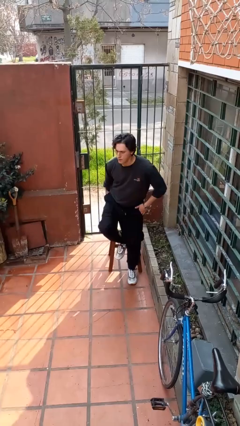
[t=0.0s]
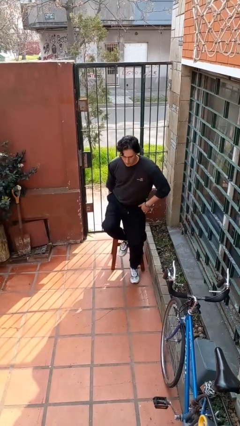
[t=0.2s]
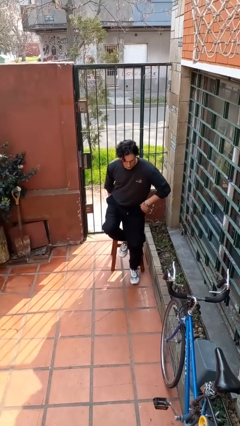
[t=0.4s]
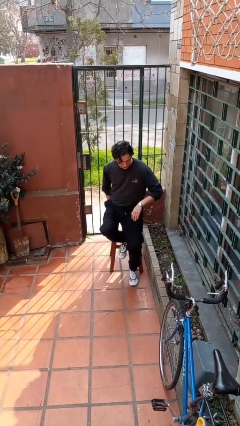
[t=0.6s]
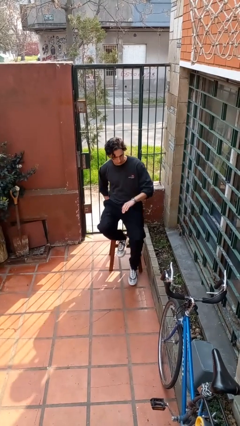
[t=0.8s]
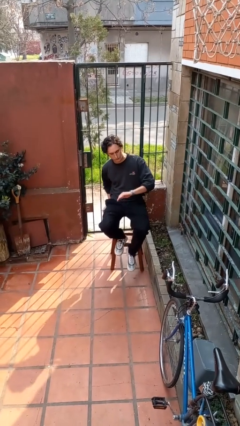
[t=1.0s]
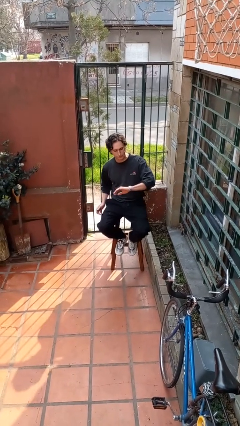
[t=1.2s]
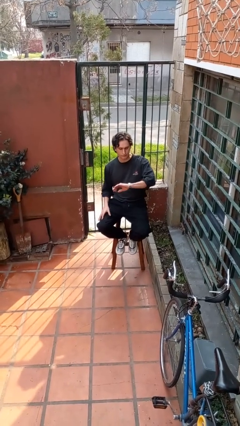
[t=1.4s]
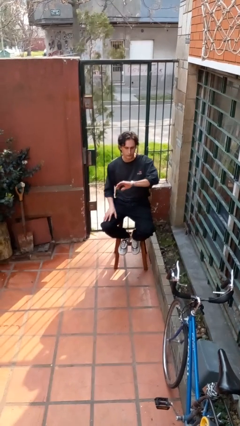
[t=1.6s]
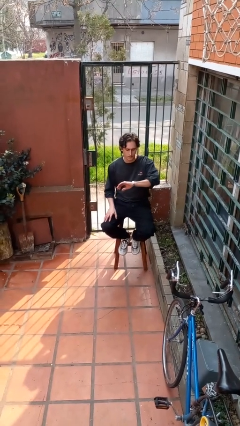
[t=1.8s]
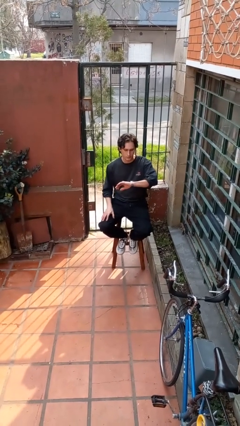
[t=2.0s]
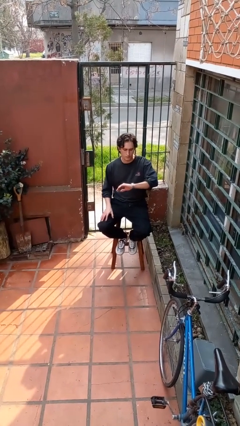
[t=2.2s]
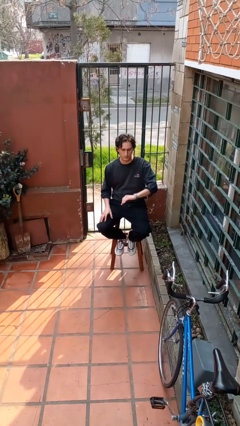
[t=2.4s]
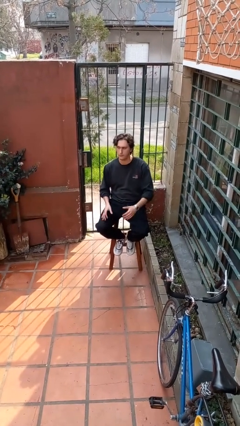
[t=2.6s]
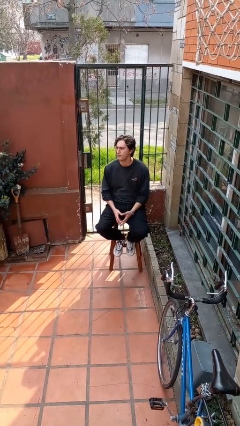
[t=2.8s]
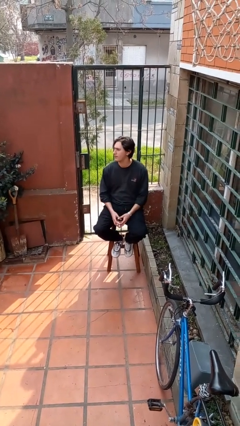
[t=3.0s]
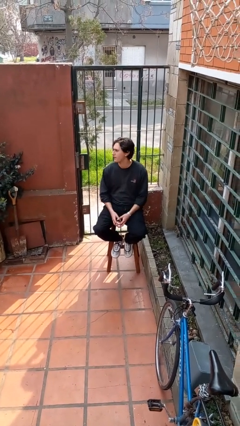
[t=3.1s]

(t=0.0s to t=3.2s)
person looks at wristwatch

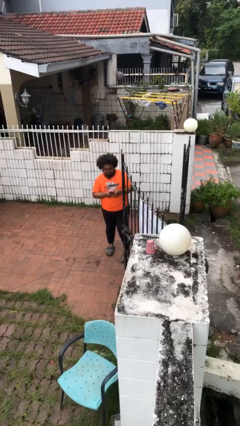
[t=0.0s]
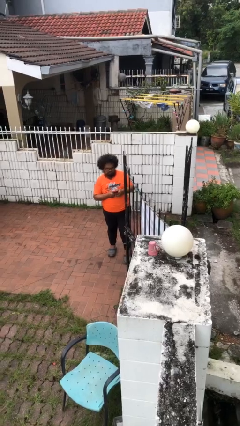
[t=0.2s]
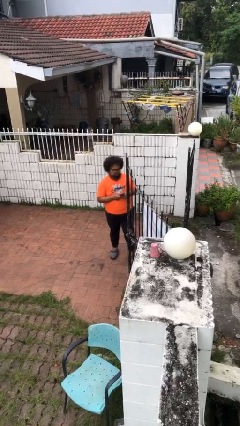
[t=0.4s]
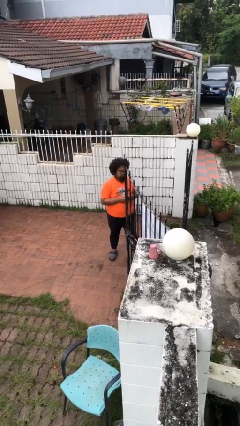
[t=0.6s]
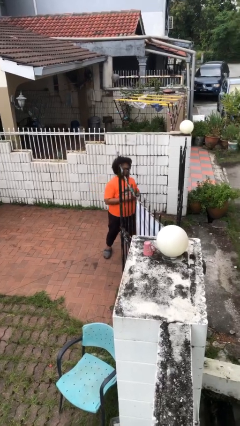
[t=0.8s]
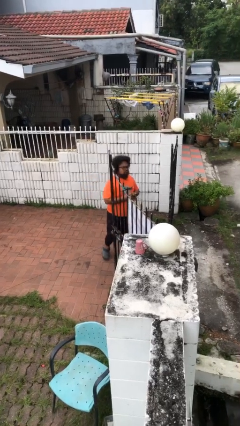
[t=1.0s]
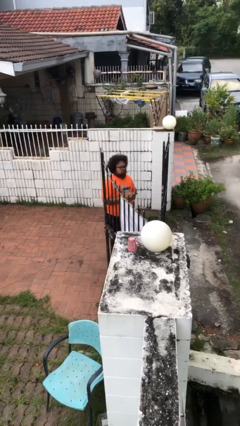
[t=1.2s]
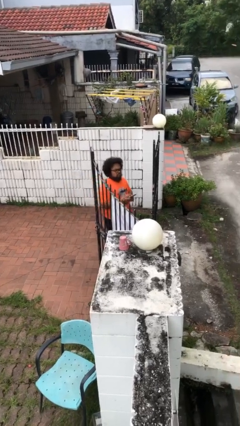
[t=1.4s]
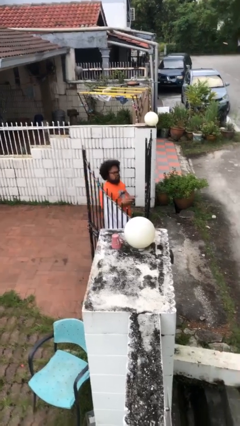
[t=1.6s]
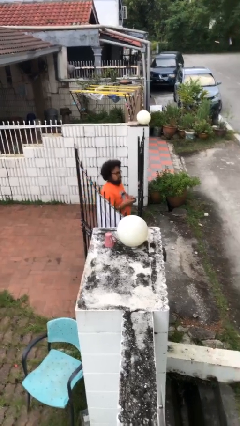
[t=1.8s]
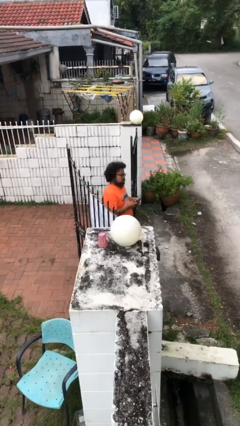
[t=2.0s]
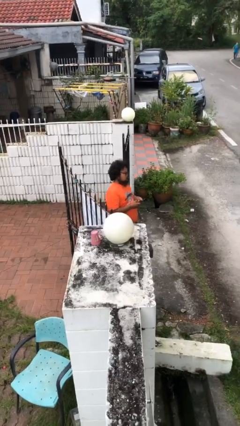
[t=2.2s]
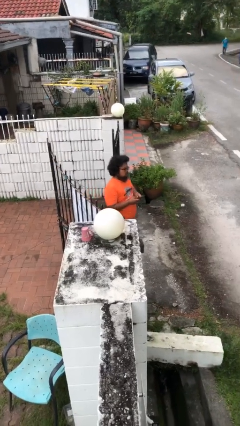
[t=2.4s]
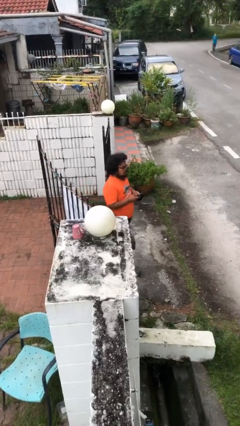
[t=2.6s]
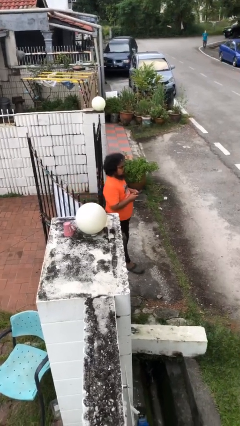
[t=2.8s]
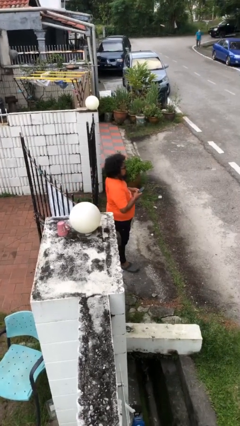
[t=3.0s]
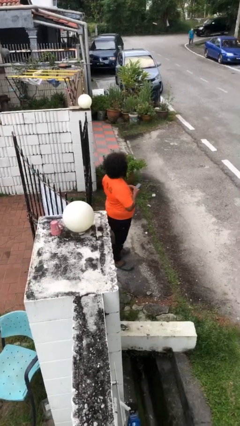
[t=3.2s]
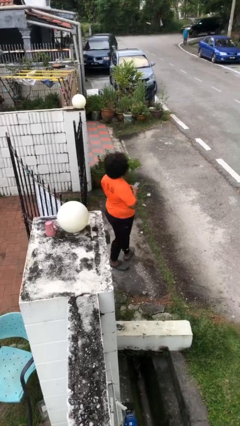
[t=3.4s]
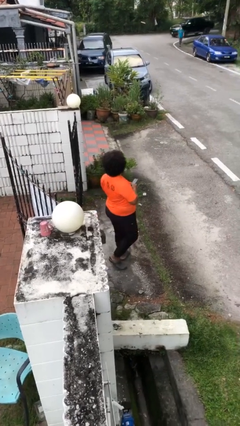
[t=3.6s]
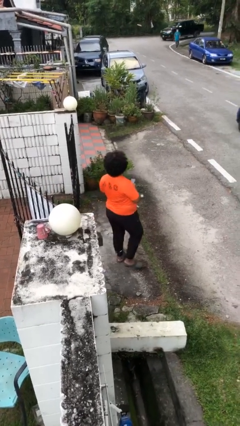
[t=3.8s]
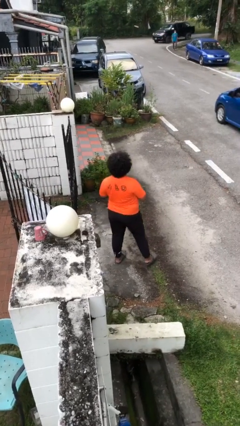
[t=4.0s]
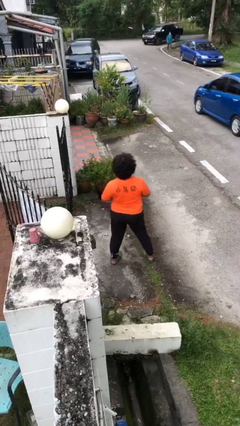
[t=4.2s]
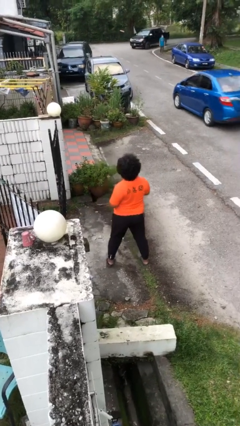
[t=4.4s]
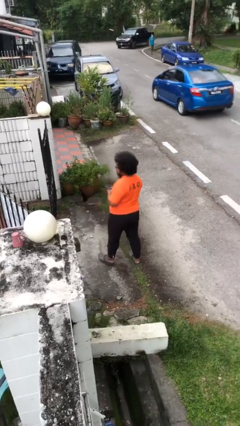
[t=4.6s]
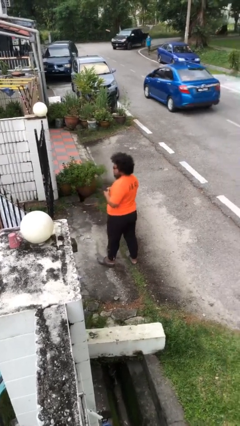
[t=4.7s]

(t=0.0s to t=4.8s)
person exits scene through structure

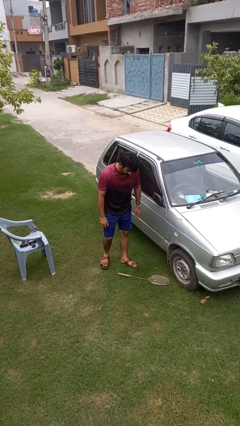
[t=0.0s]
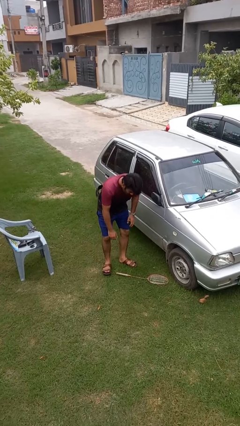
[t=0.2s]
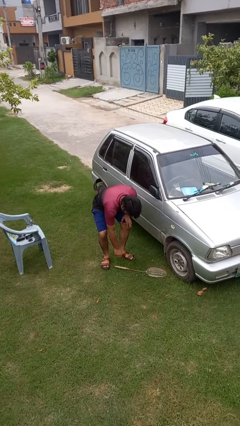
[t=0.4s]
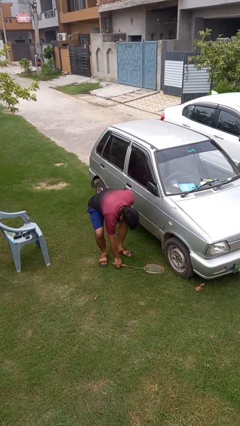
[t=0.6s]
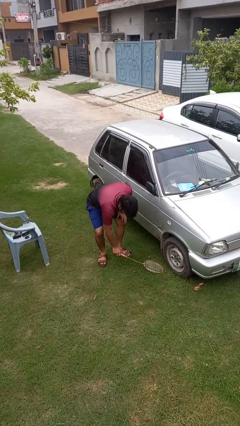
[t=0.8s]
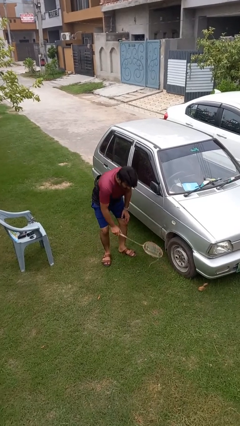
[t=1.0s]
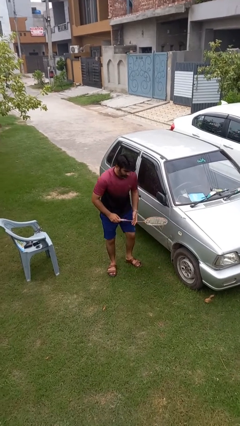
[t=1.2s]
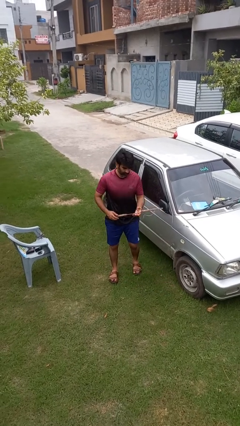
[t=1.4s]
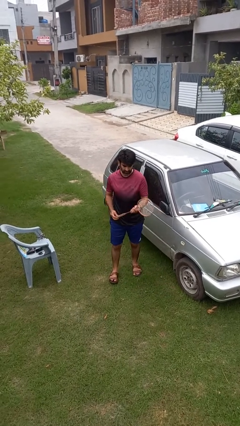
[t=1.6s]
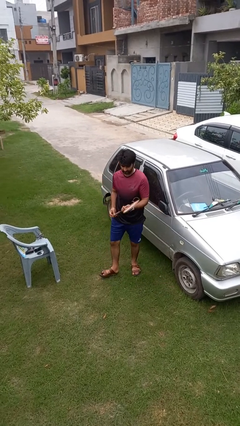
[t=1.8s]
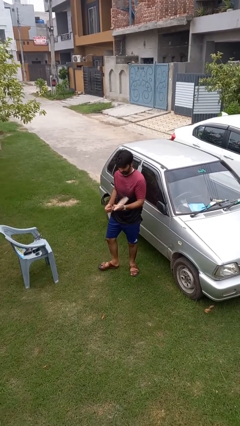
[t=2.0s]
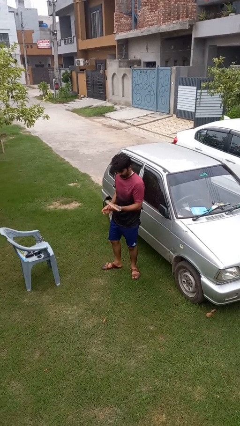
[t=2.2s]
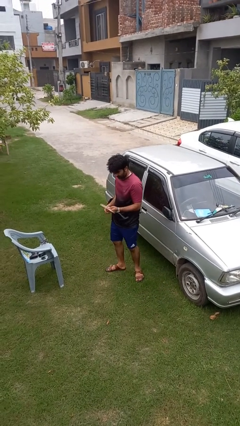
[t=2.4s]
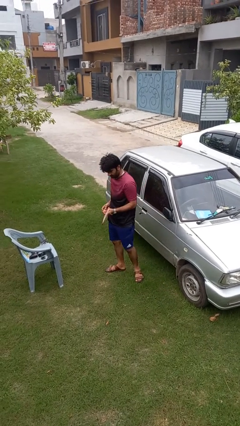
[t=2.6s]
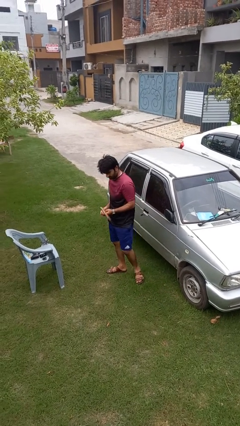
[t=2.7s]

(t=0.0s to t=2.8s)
person picks up object from floor

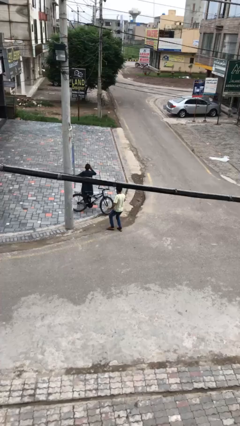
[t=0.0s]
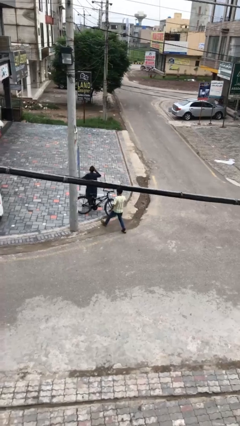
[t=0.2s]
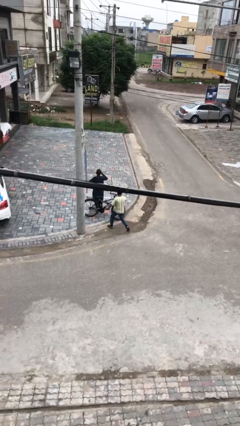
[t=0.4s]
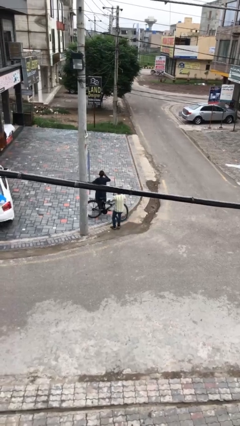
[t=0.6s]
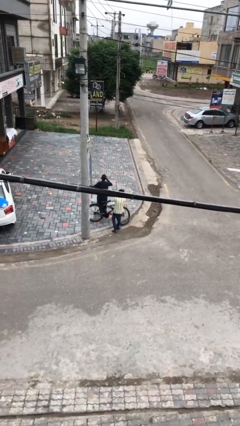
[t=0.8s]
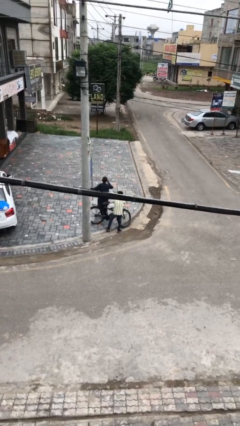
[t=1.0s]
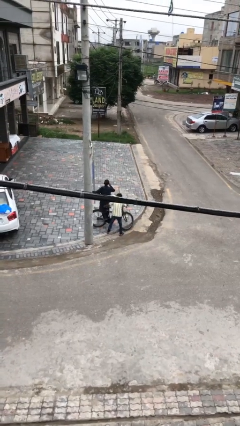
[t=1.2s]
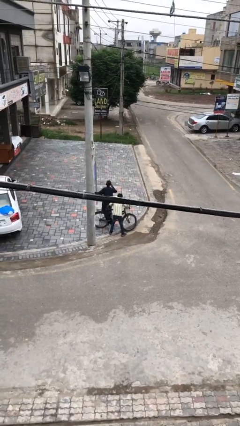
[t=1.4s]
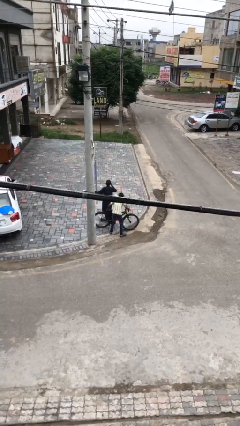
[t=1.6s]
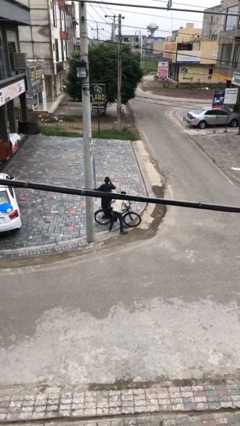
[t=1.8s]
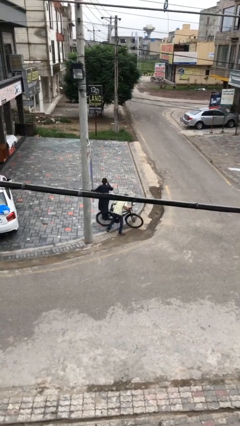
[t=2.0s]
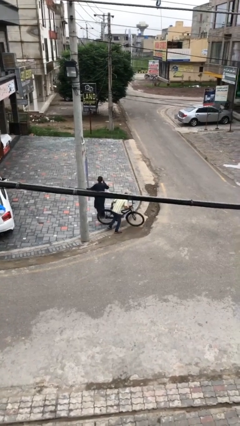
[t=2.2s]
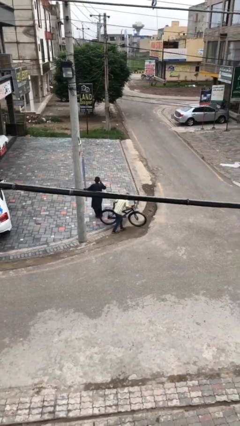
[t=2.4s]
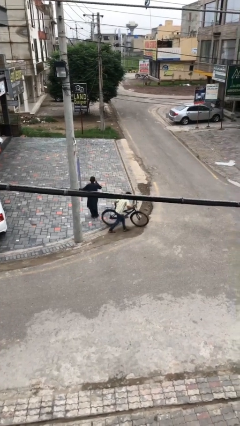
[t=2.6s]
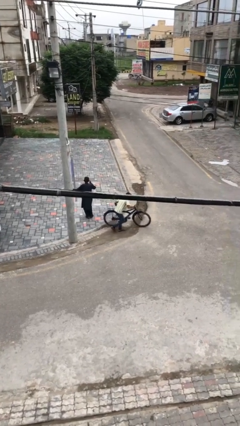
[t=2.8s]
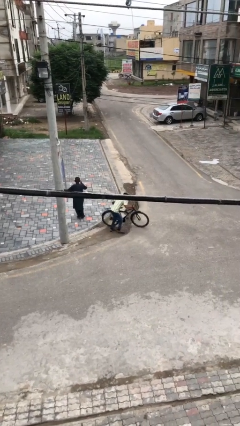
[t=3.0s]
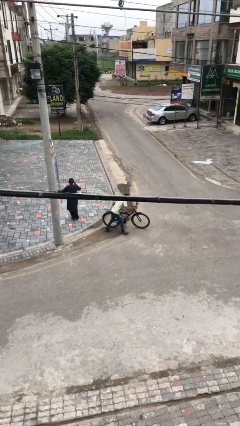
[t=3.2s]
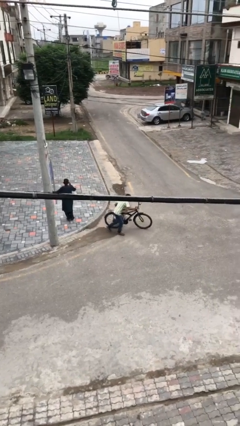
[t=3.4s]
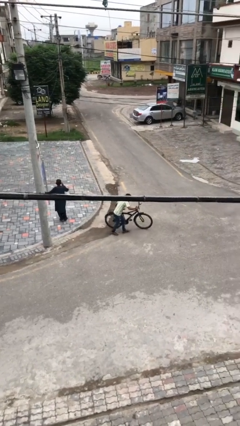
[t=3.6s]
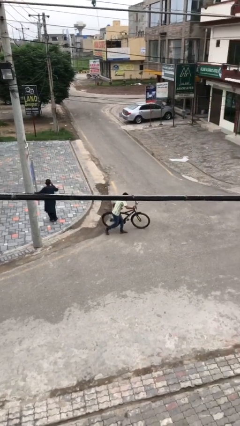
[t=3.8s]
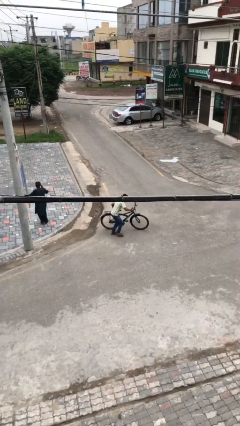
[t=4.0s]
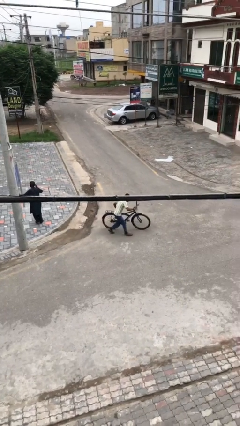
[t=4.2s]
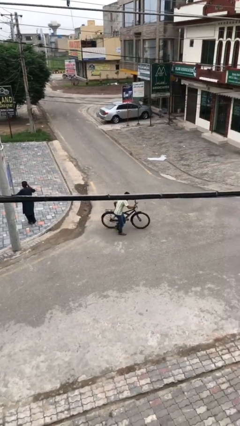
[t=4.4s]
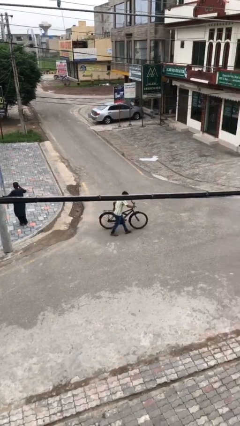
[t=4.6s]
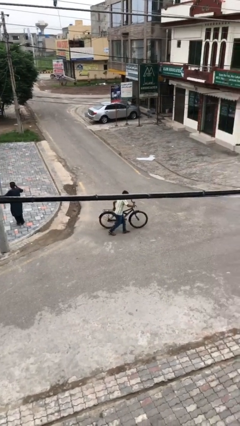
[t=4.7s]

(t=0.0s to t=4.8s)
person steals object from person

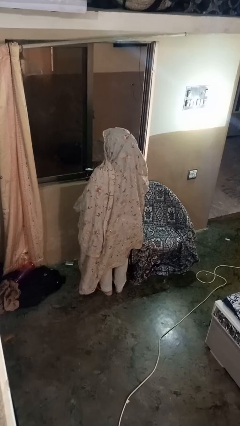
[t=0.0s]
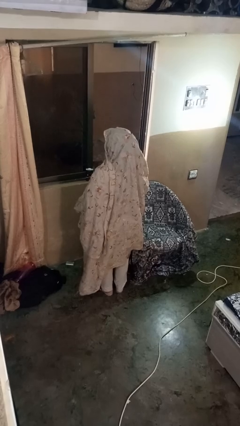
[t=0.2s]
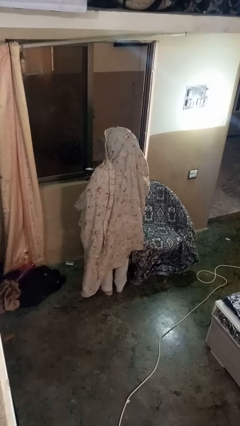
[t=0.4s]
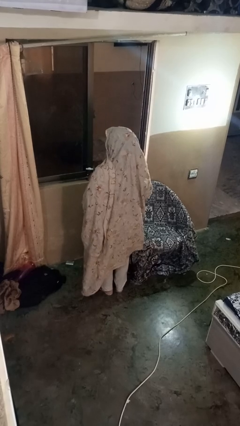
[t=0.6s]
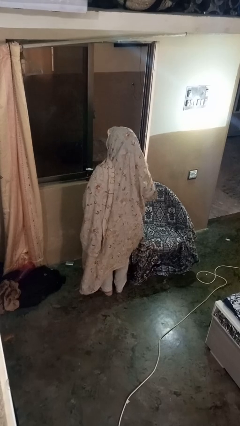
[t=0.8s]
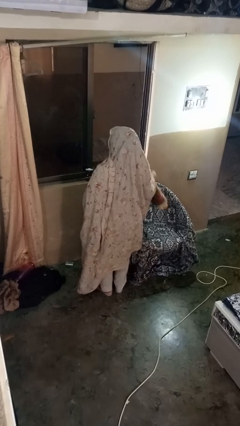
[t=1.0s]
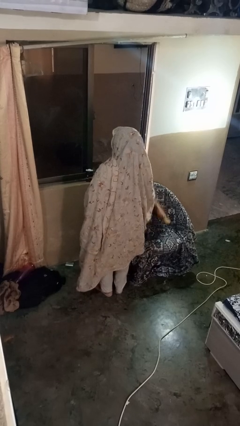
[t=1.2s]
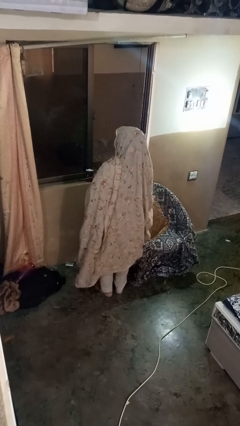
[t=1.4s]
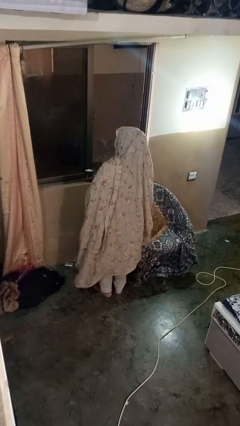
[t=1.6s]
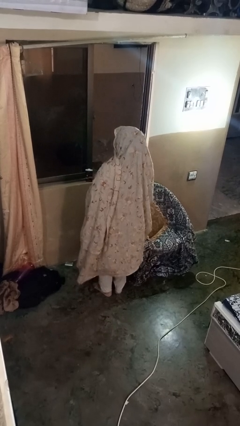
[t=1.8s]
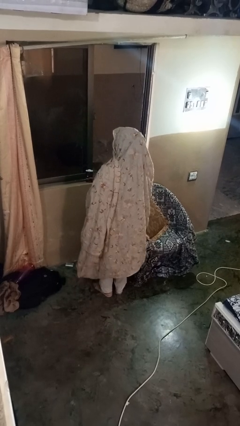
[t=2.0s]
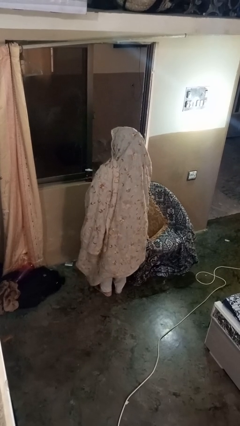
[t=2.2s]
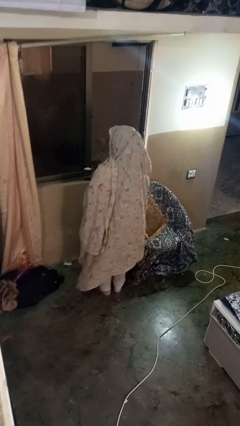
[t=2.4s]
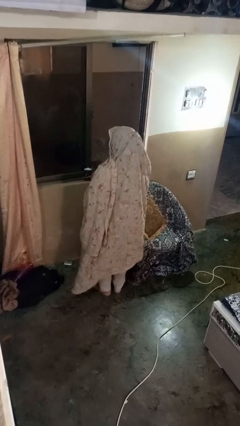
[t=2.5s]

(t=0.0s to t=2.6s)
person puts down object on couch
